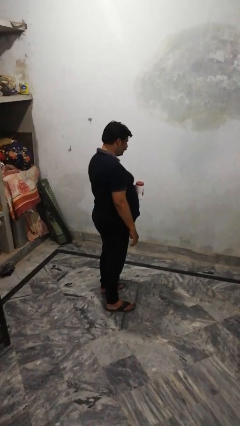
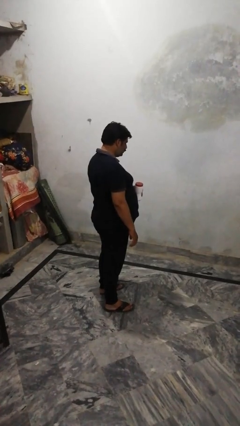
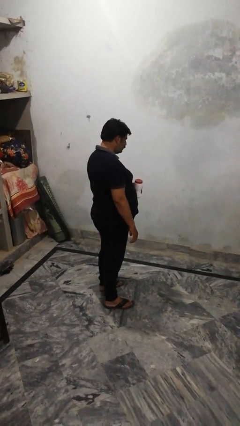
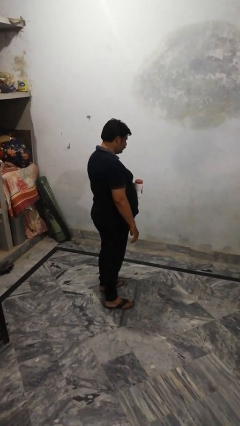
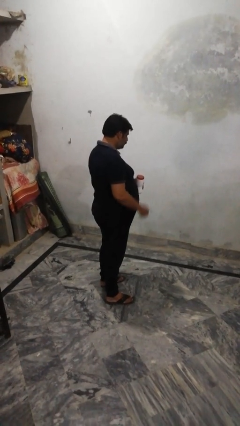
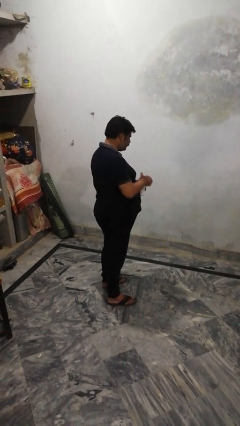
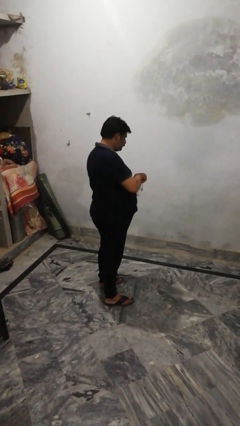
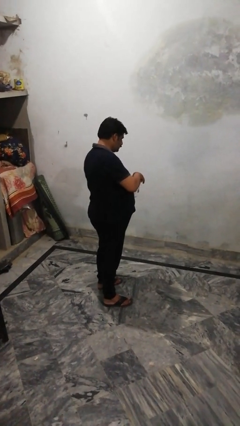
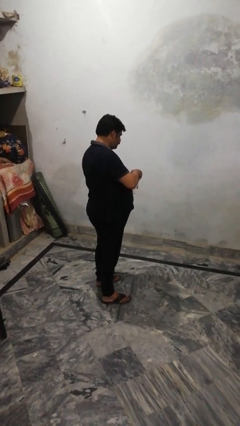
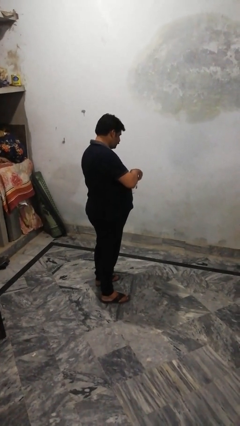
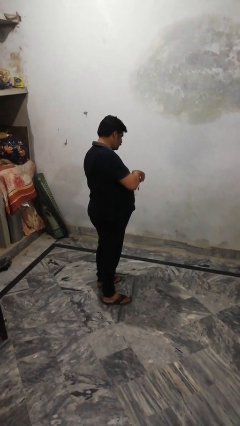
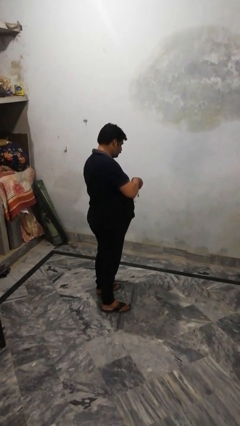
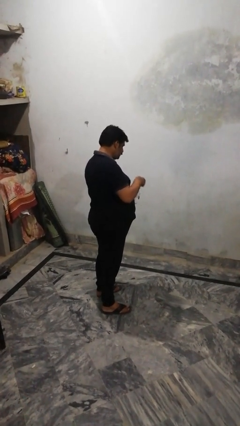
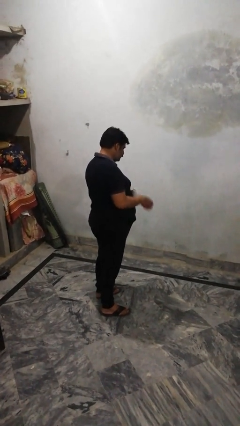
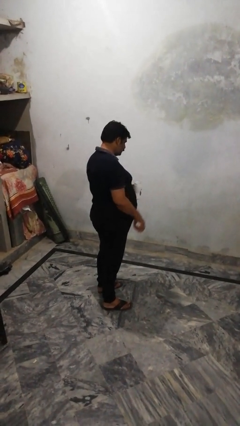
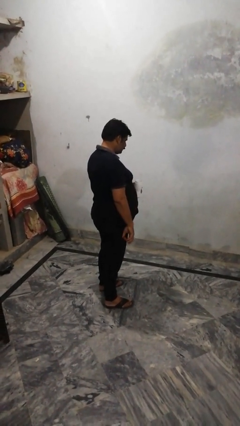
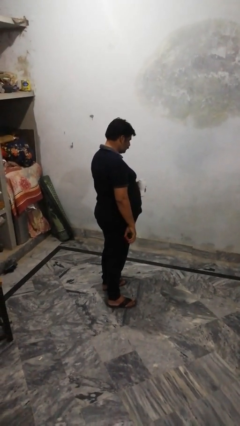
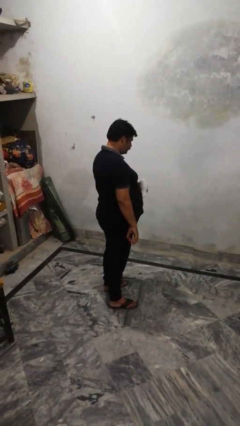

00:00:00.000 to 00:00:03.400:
person opens jar

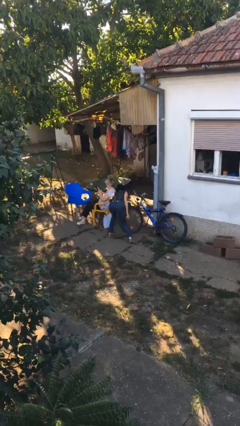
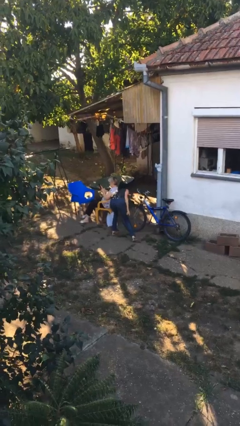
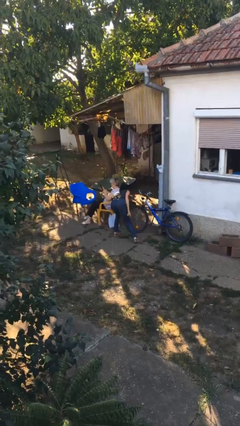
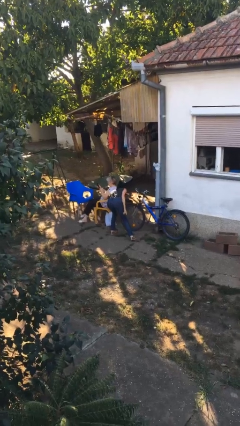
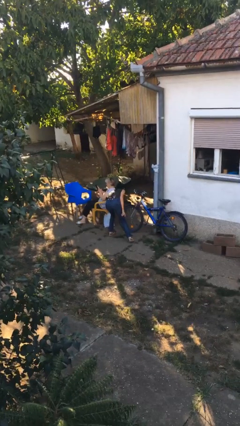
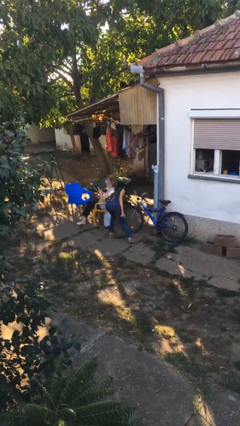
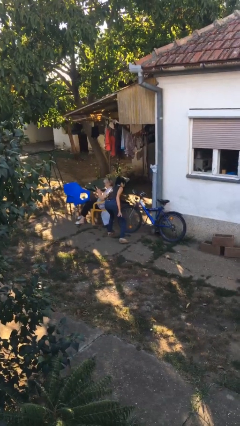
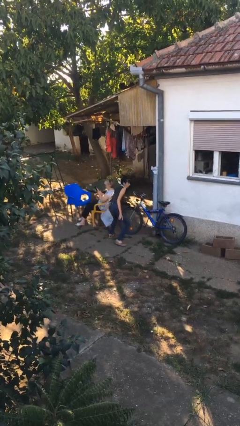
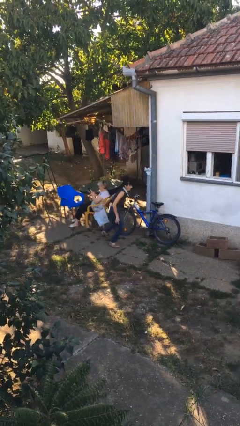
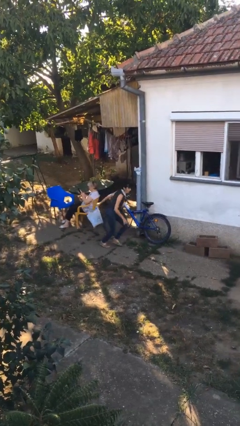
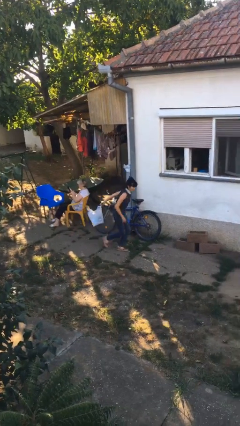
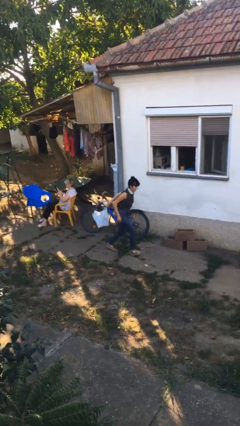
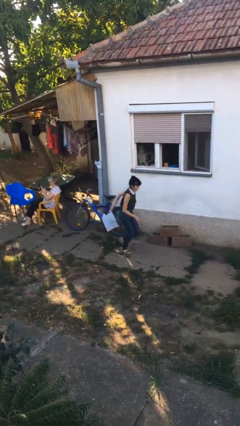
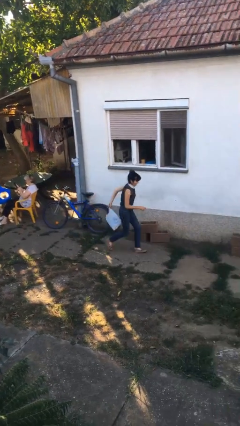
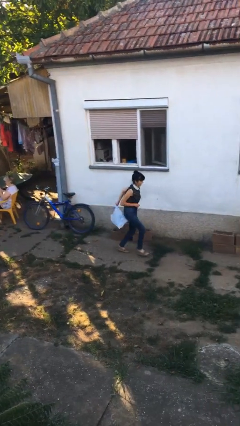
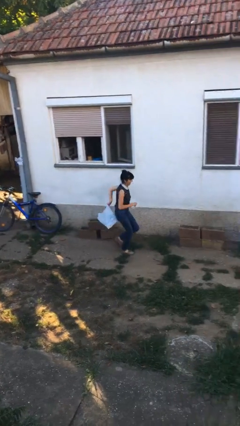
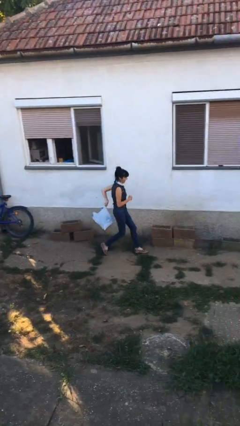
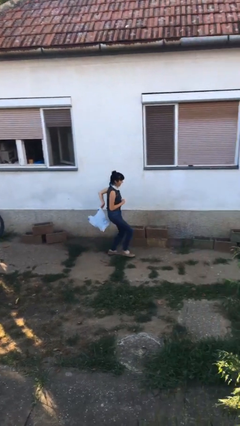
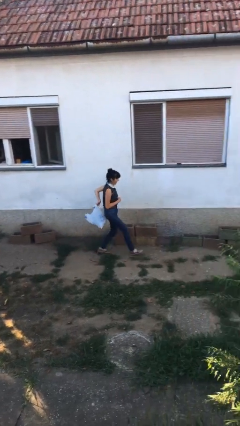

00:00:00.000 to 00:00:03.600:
person steals object from person

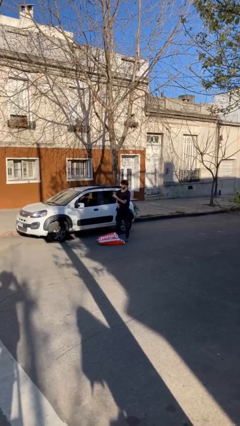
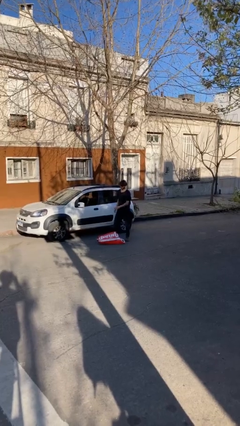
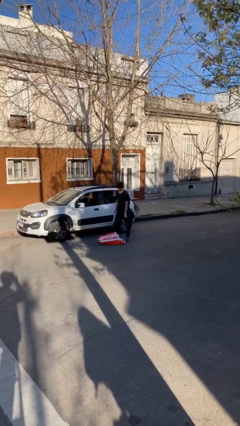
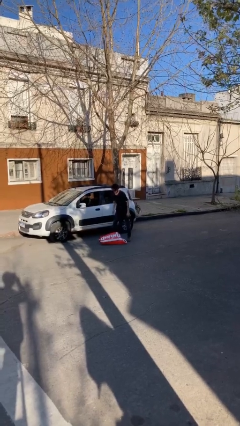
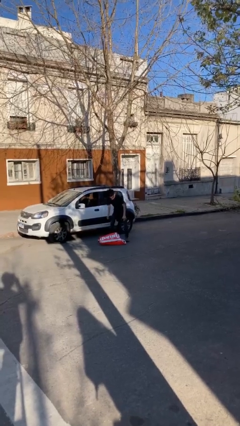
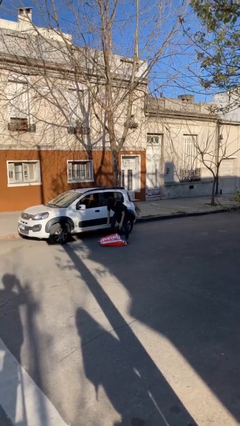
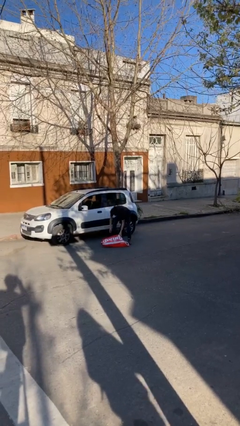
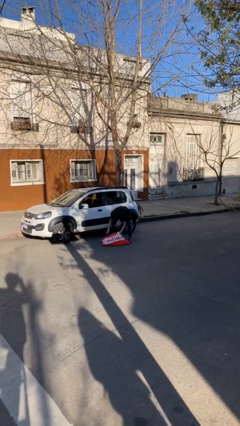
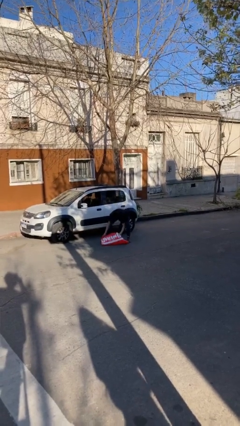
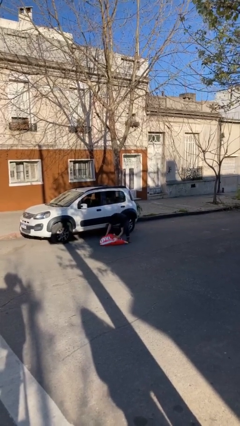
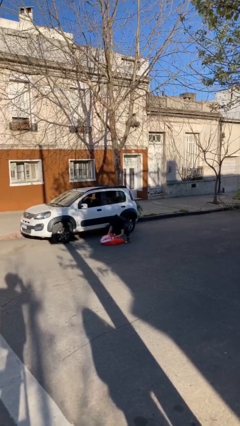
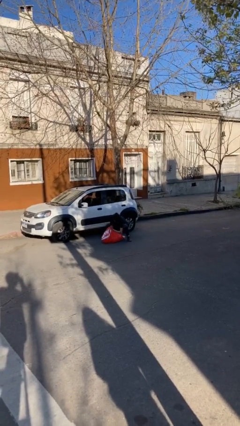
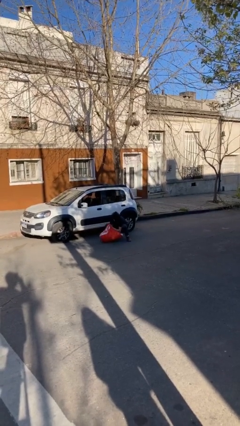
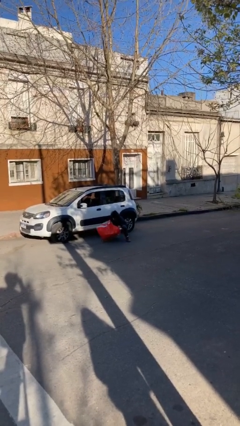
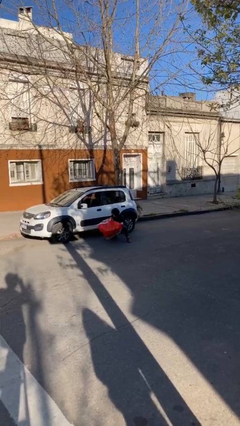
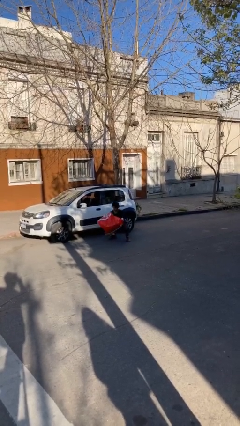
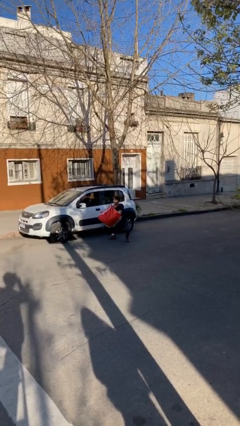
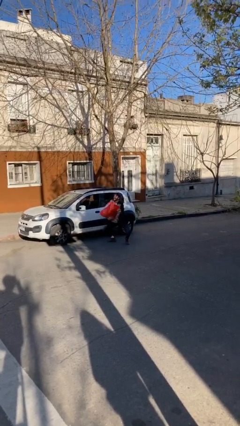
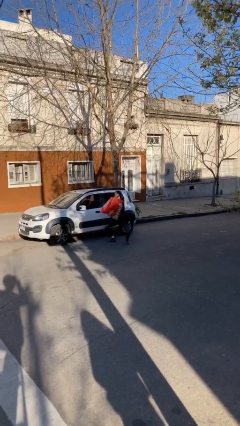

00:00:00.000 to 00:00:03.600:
person picks up object from floor

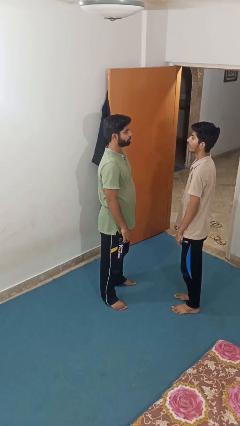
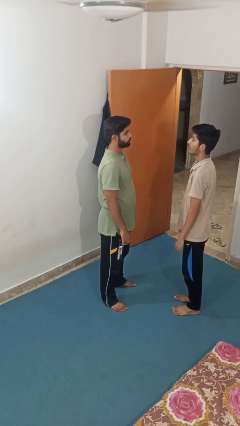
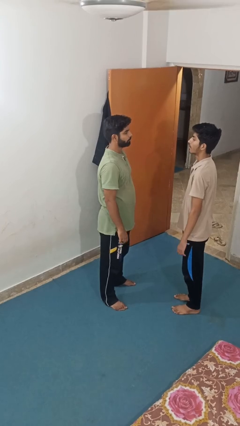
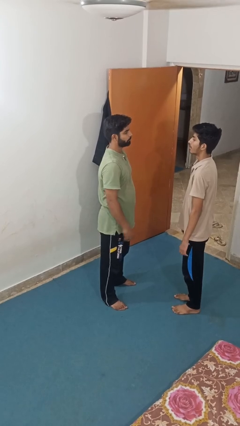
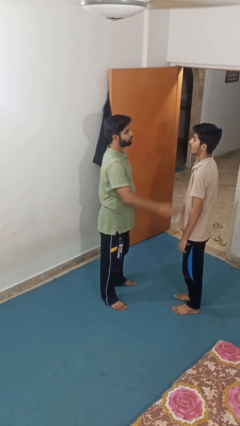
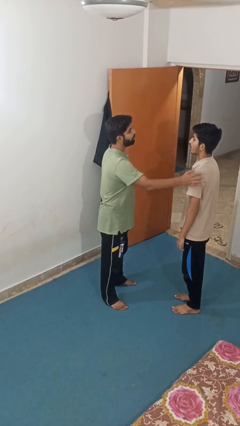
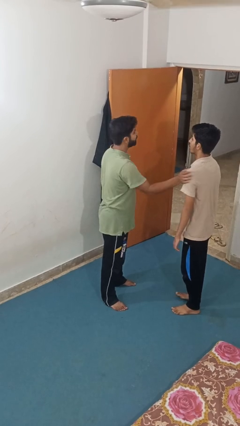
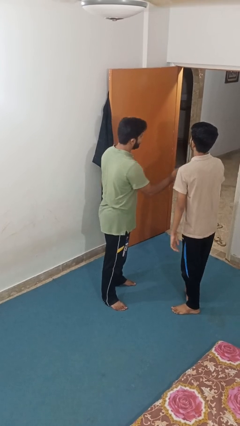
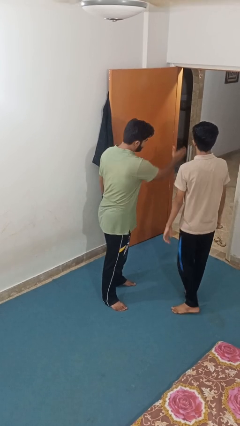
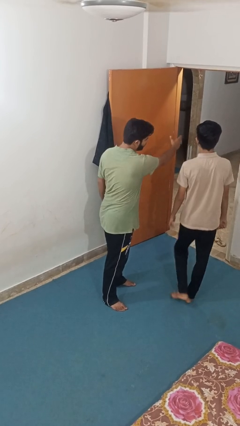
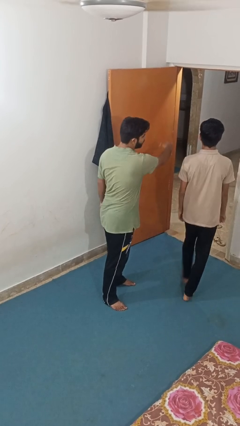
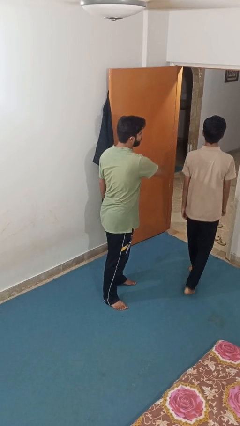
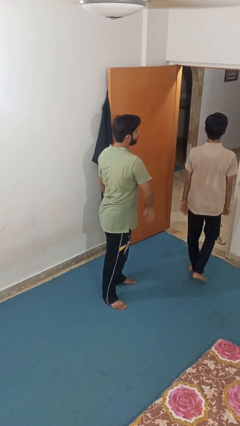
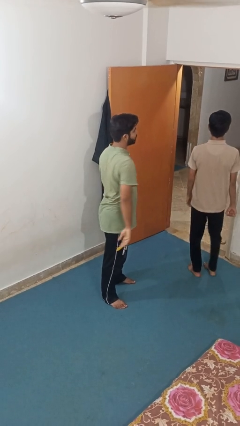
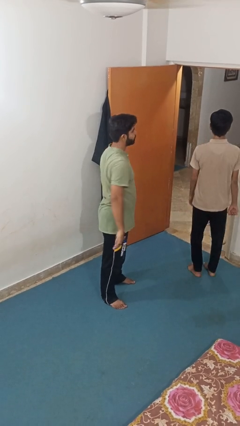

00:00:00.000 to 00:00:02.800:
person shoves person

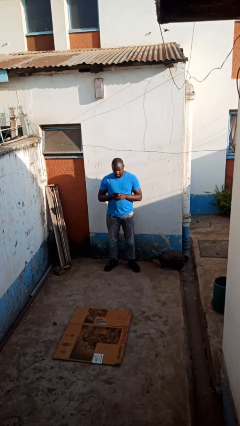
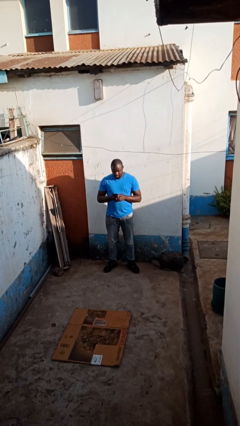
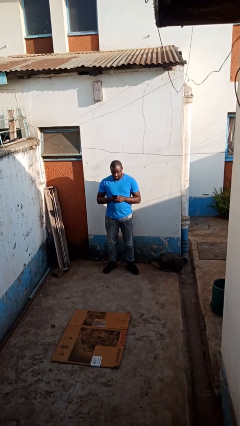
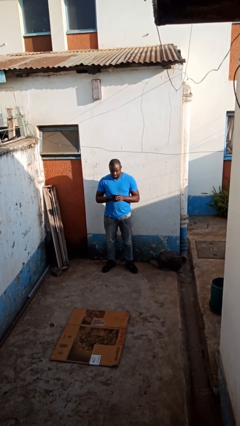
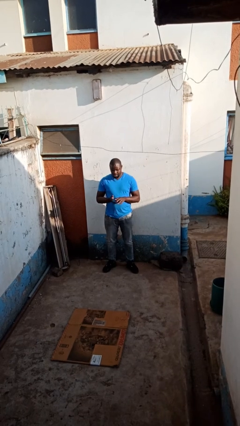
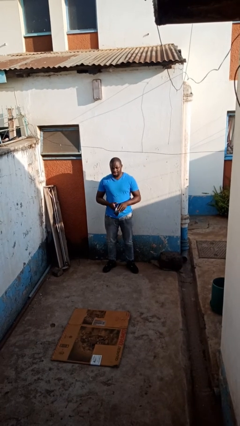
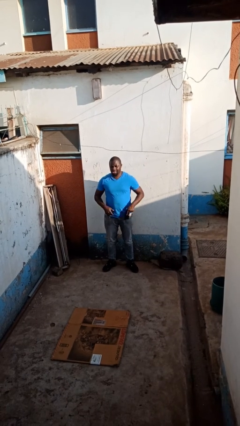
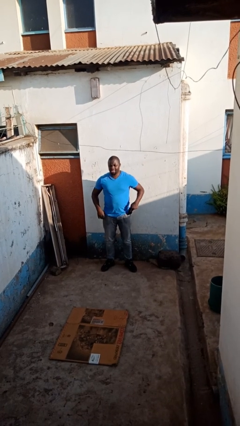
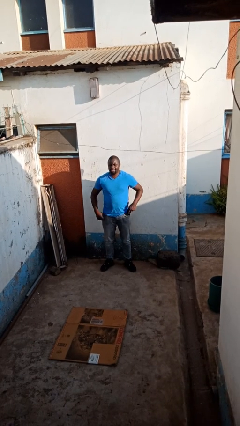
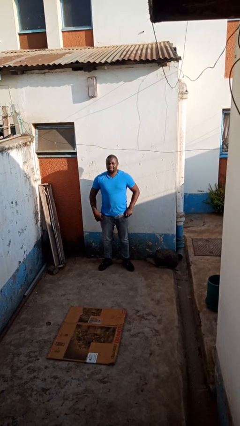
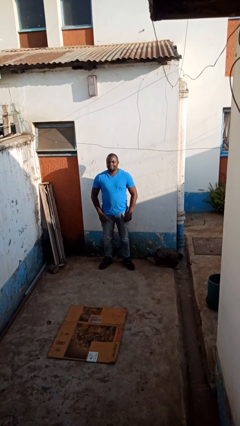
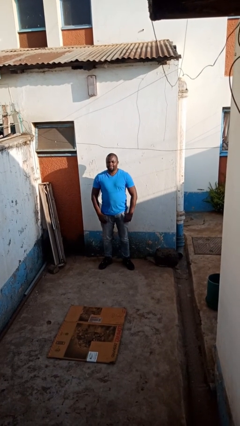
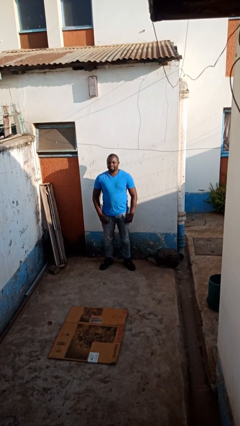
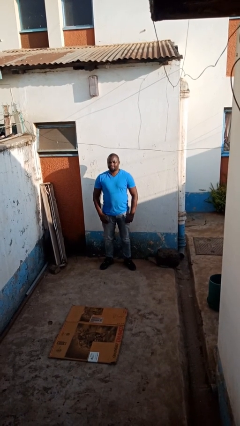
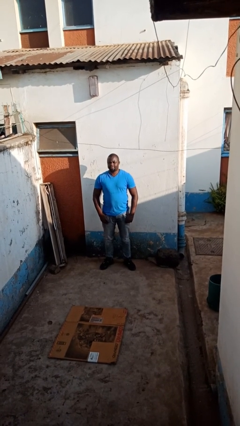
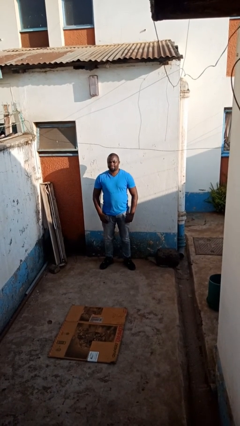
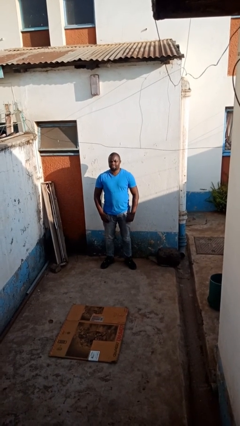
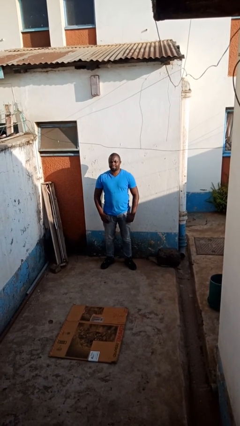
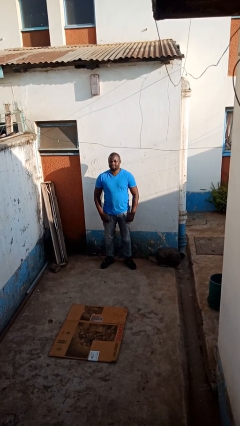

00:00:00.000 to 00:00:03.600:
person puts phone into pocket

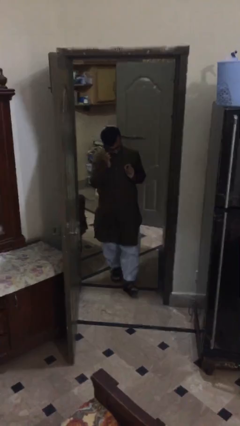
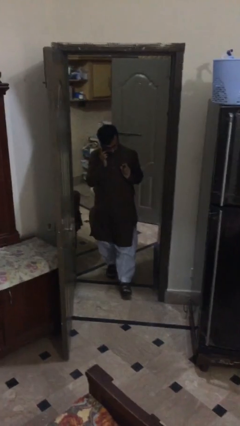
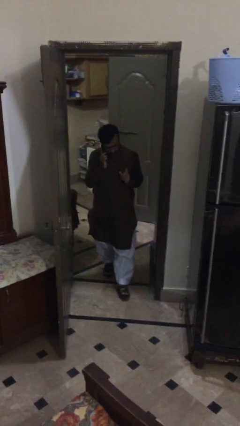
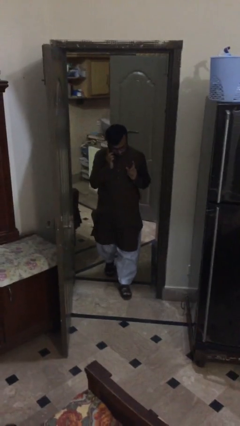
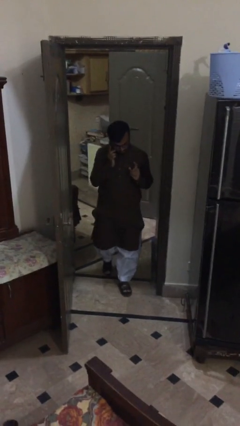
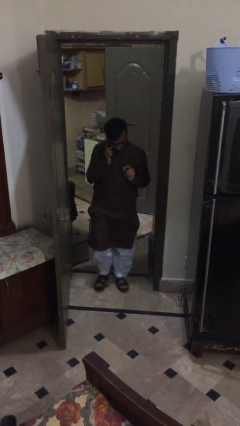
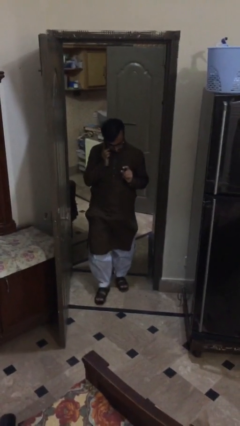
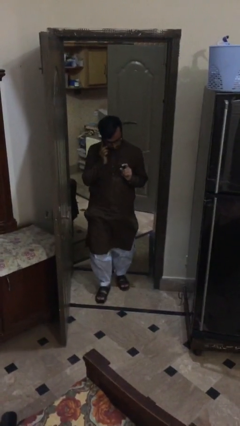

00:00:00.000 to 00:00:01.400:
person enters scene through structure
